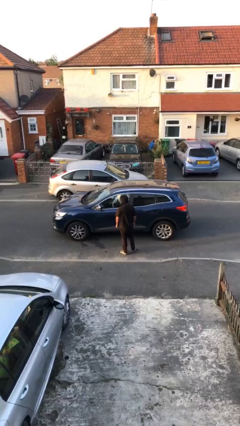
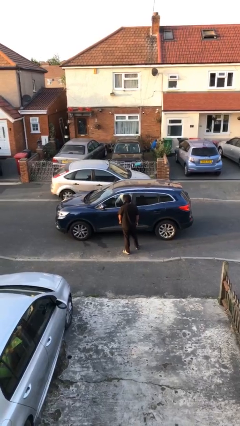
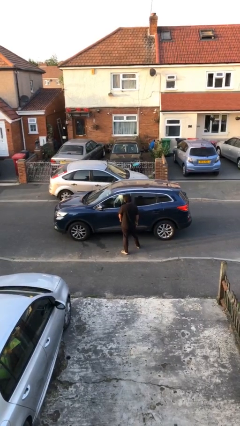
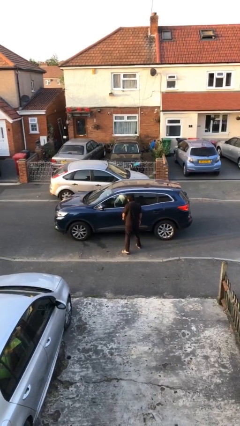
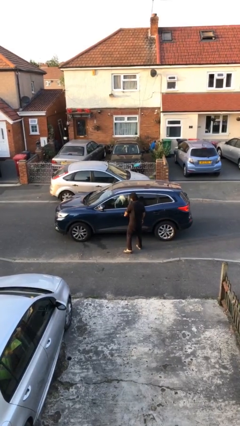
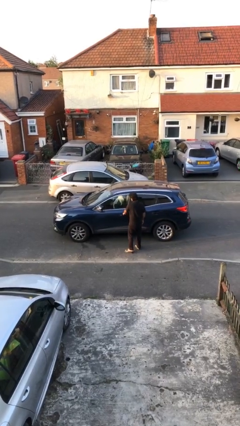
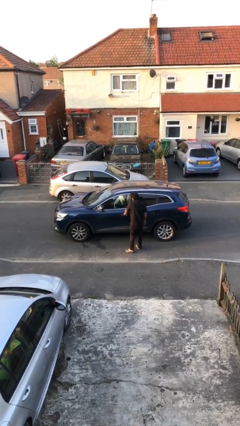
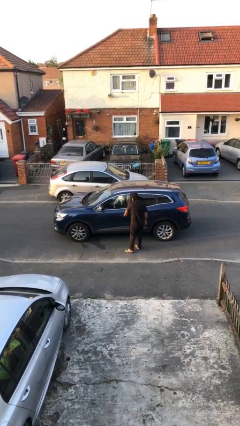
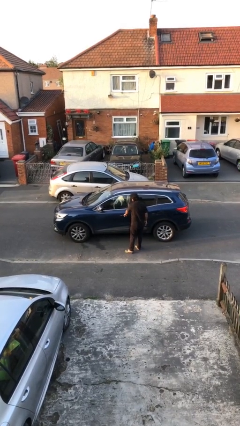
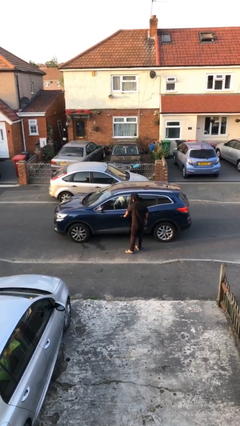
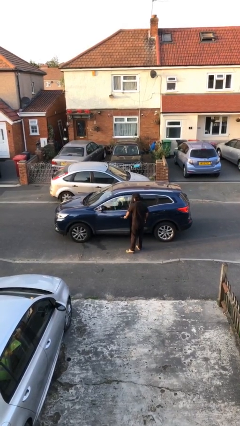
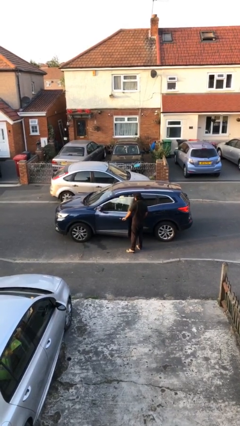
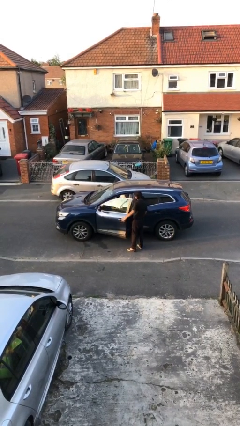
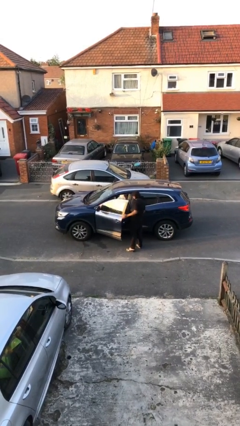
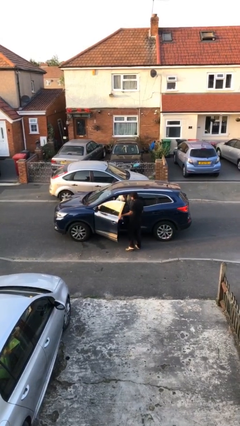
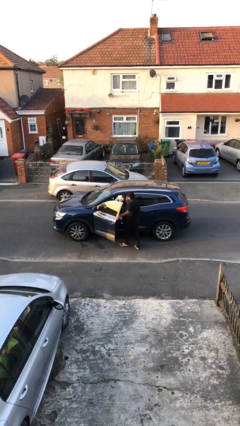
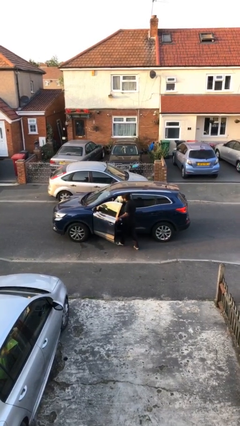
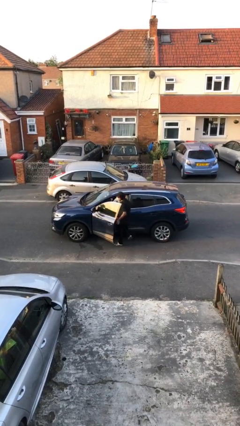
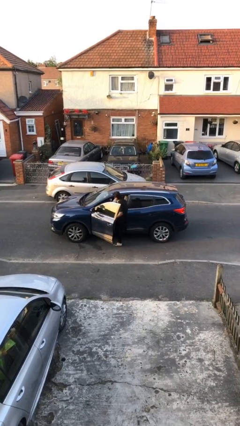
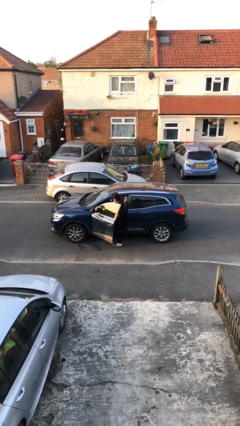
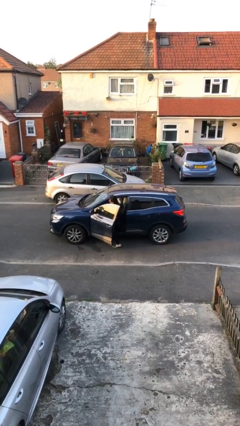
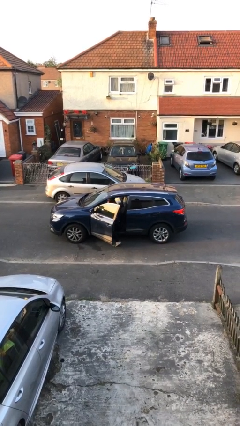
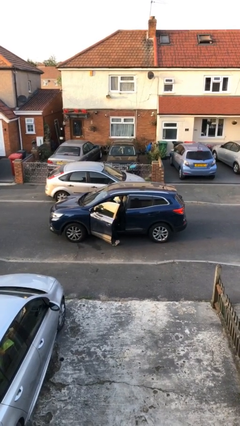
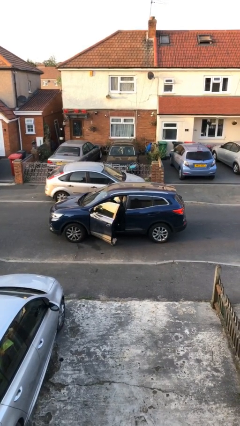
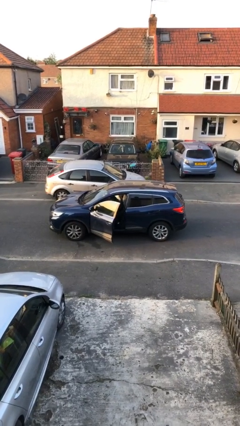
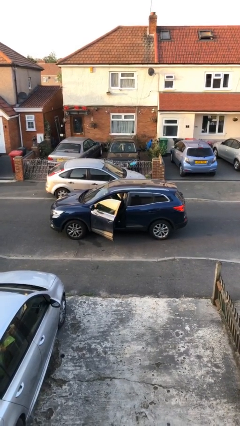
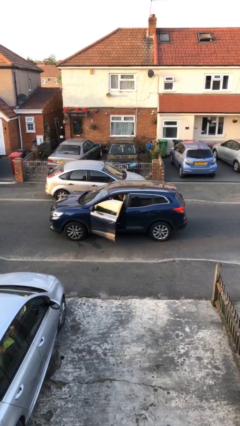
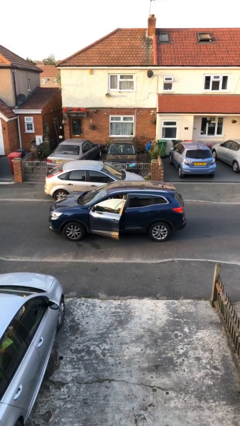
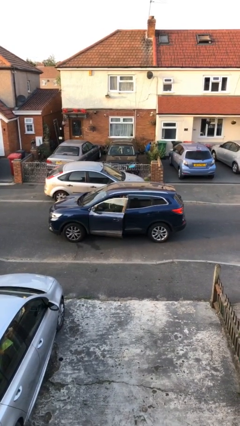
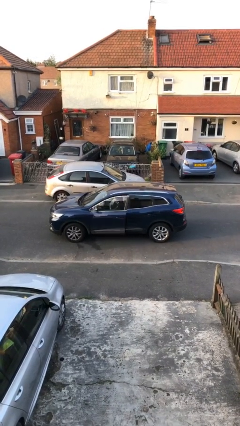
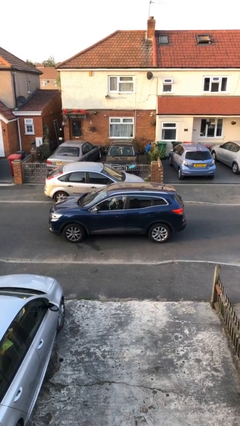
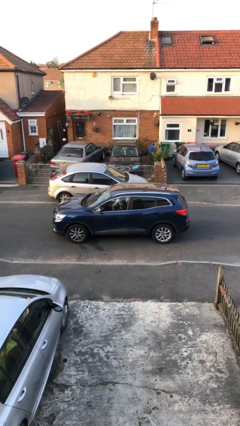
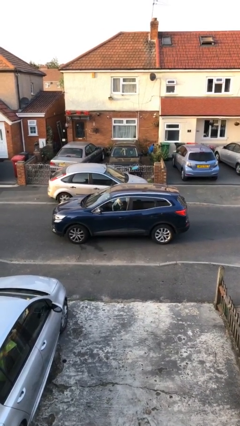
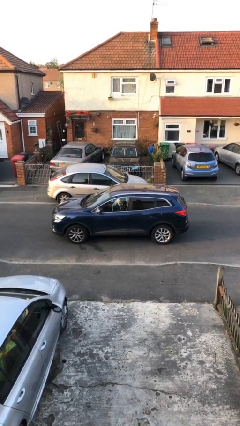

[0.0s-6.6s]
car picks up person

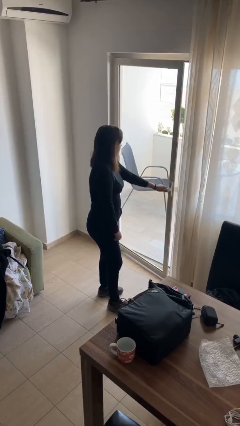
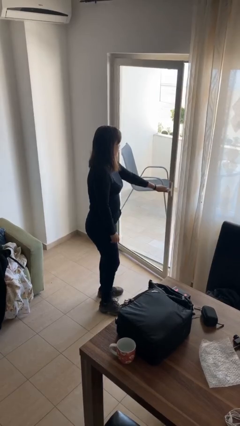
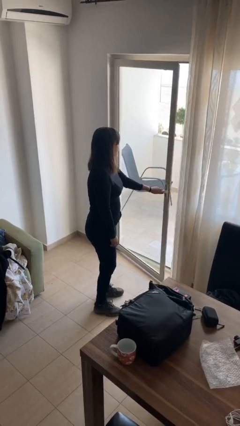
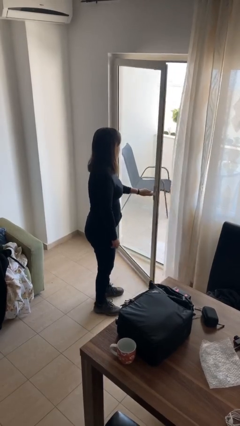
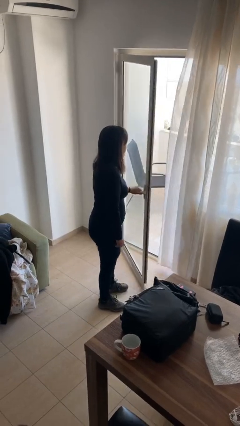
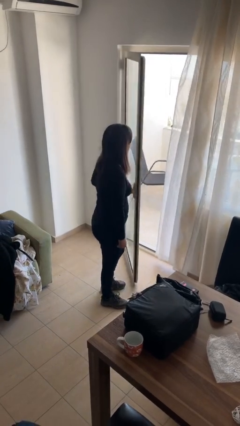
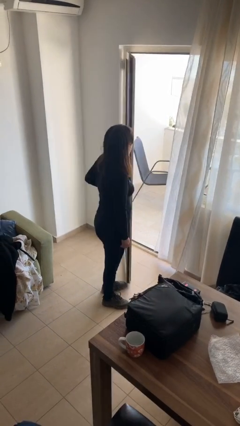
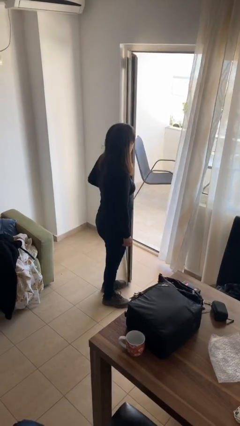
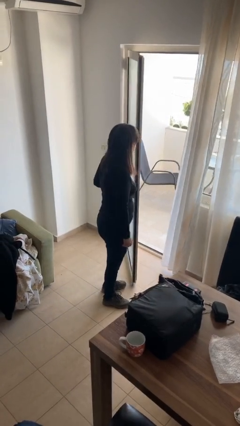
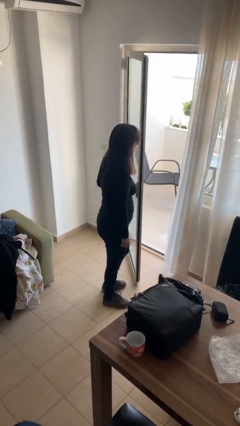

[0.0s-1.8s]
person opens facility door

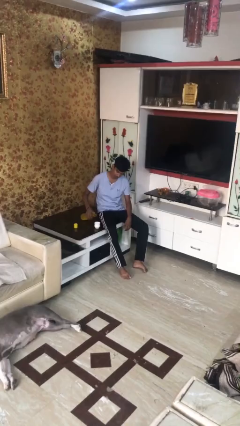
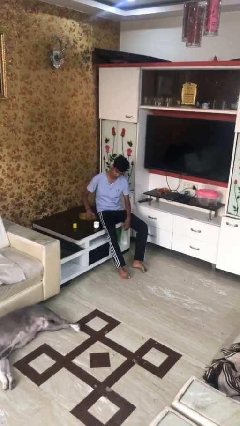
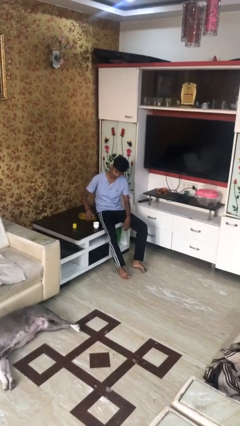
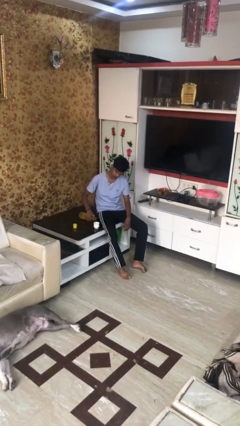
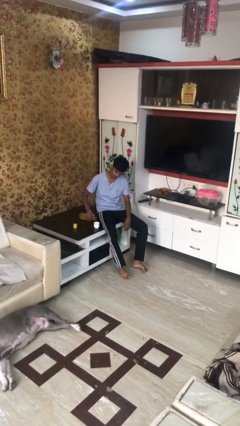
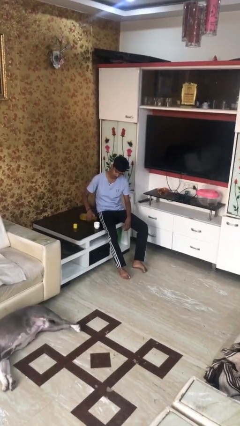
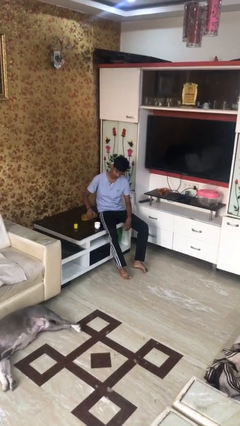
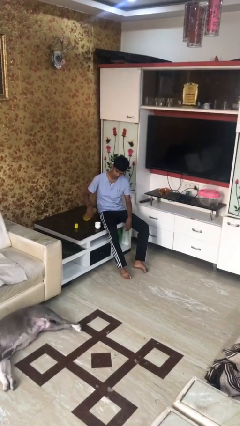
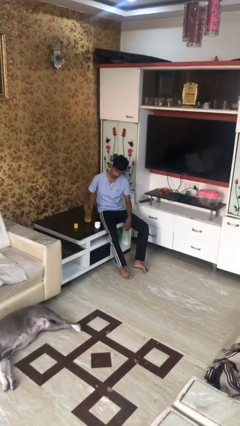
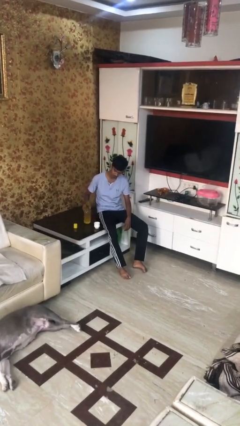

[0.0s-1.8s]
person pours liquid into cup

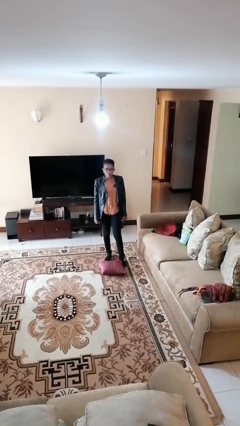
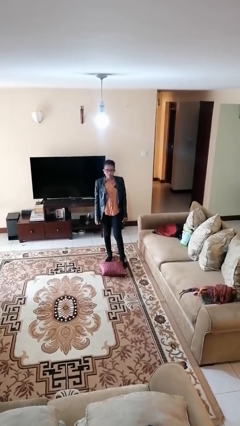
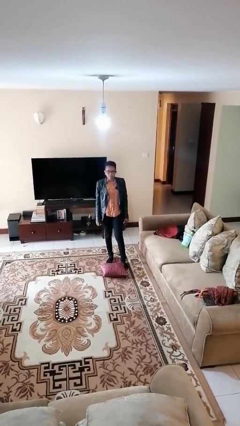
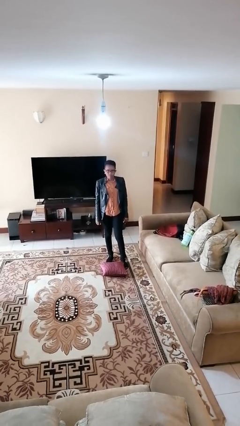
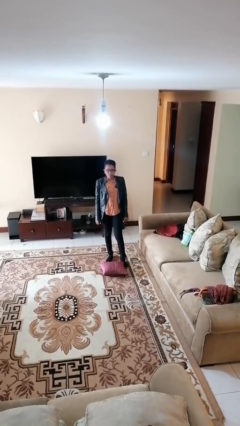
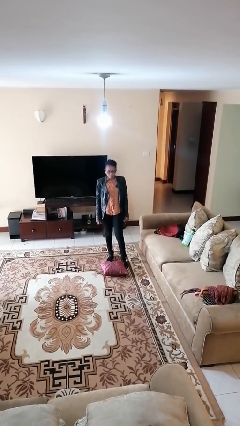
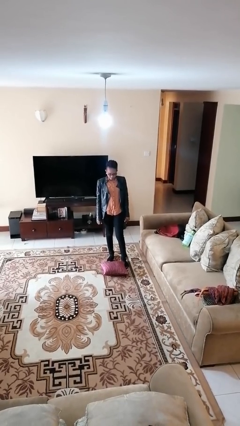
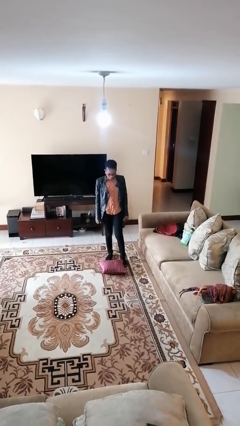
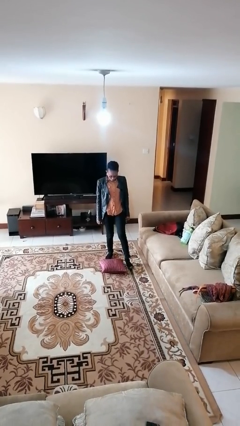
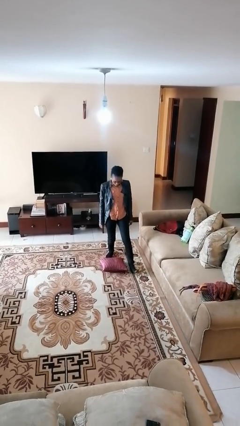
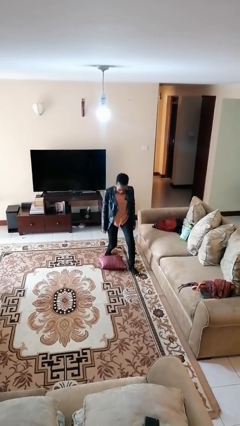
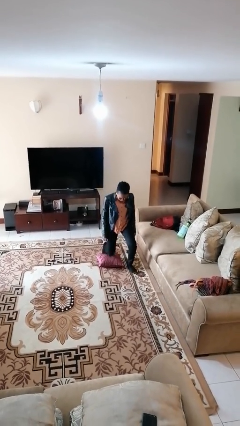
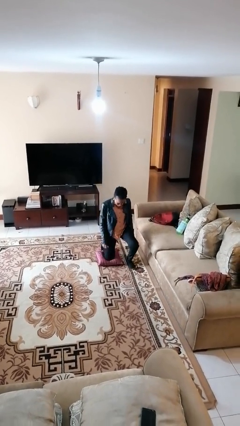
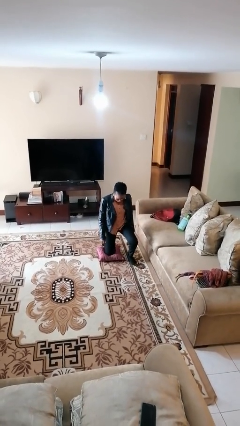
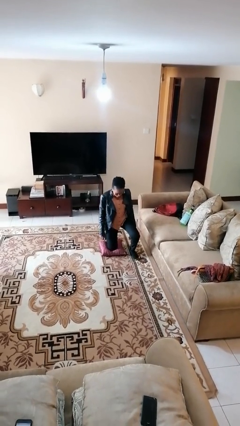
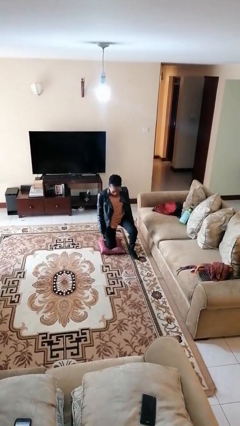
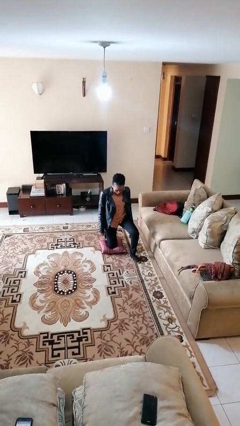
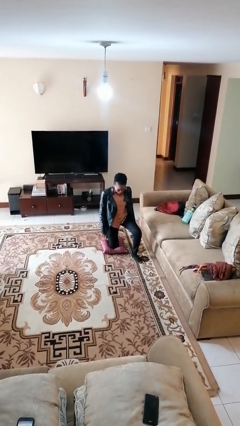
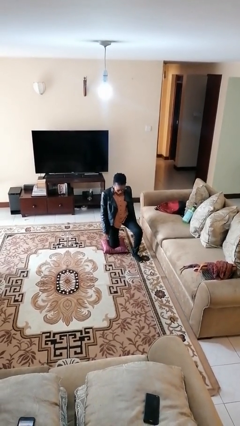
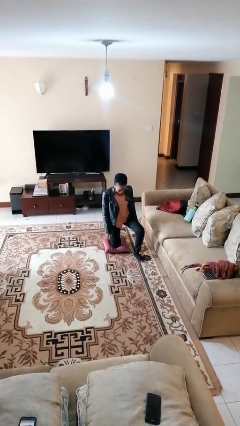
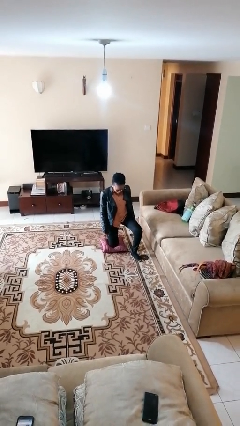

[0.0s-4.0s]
person kneels

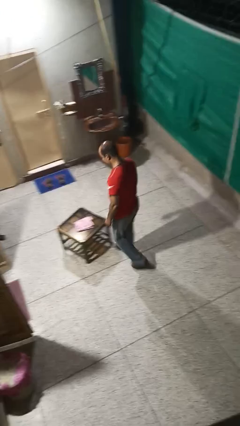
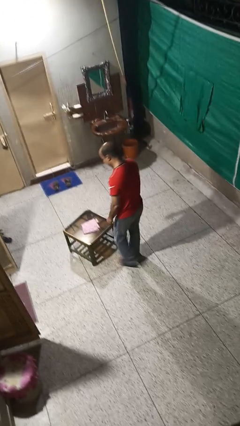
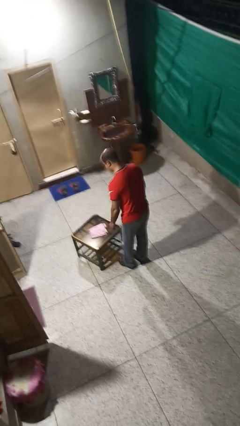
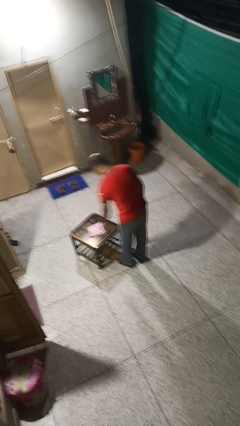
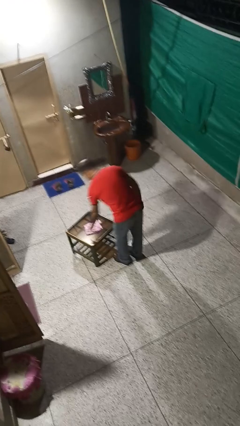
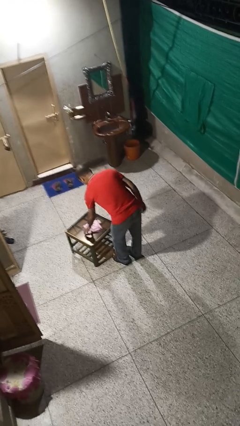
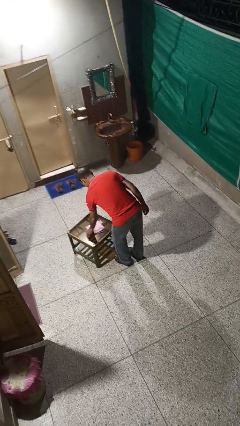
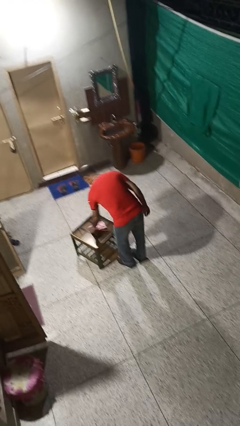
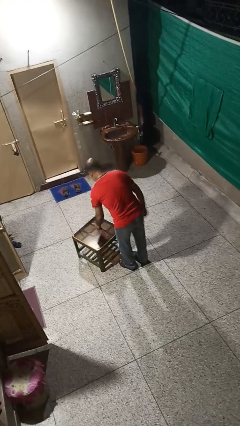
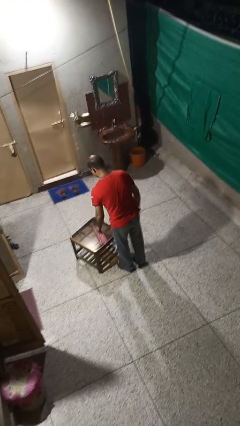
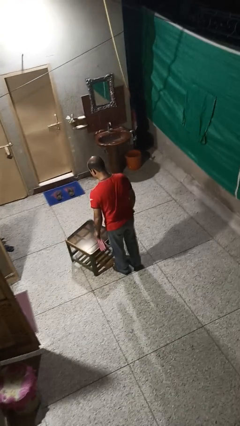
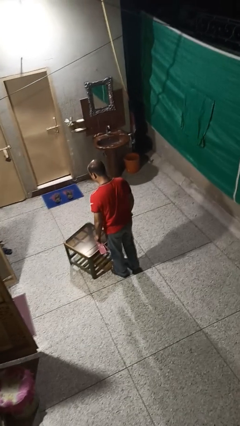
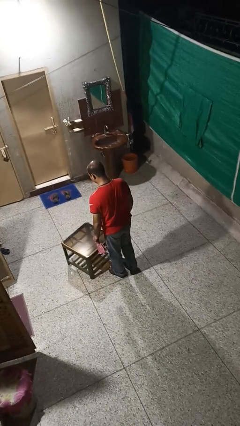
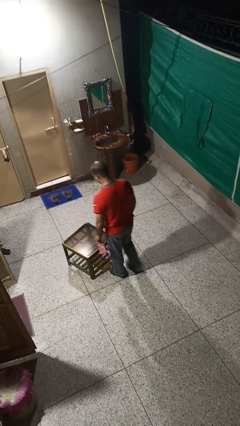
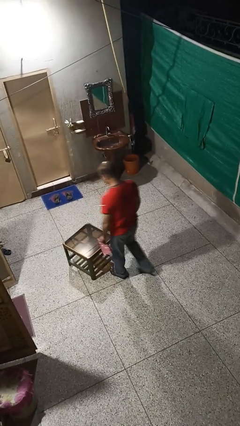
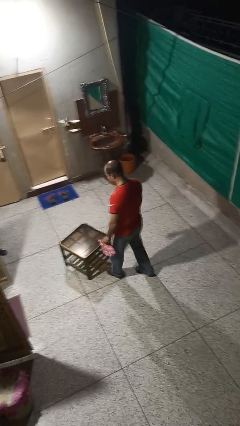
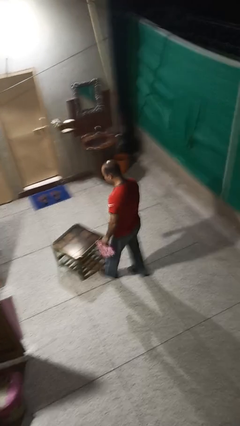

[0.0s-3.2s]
person picks up object from table

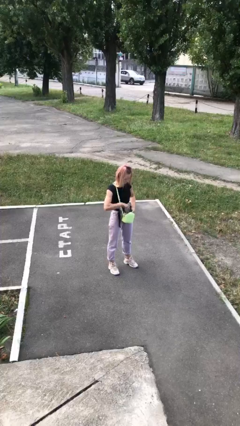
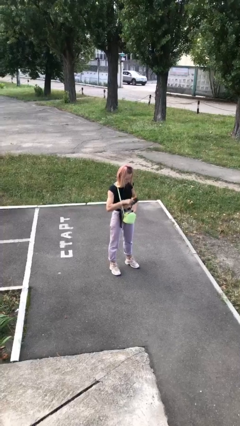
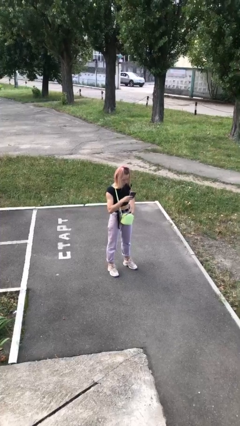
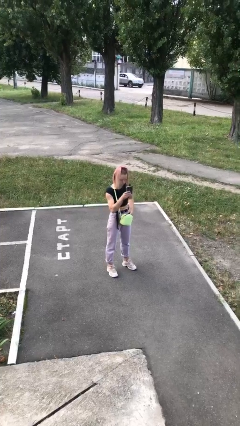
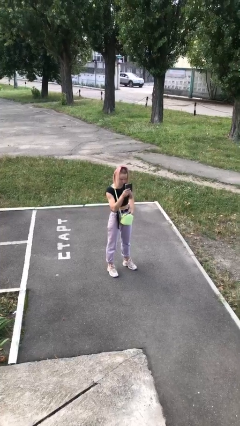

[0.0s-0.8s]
person takes object from backpack
